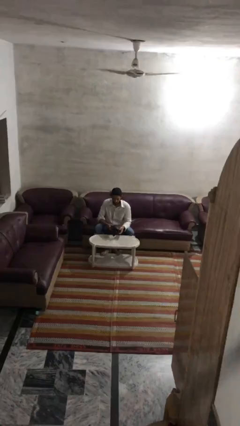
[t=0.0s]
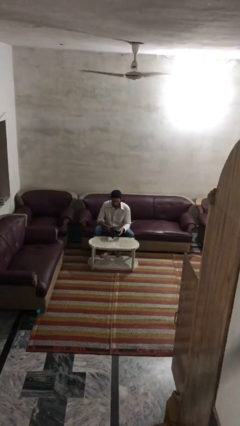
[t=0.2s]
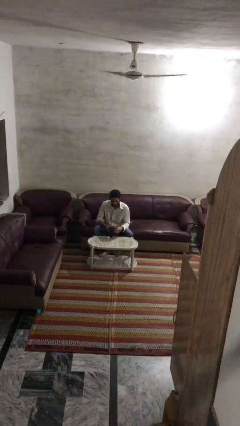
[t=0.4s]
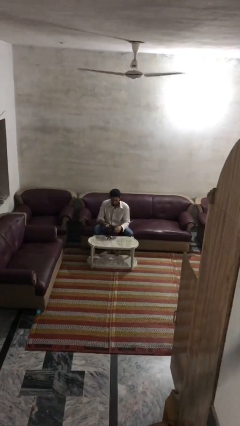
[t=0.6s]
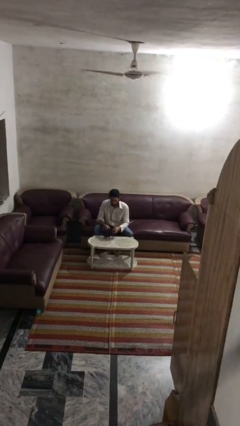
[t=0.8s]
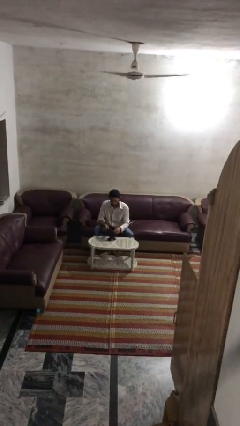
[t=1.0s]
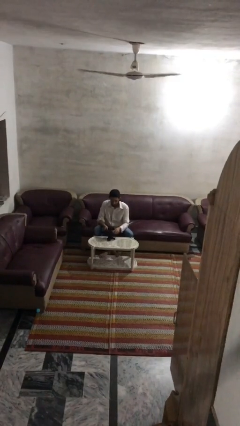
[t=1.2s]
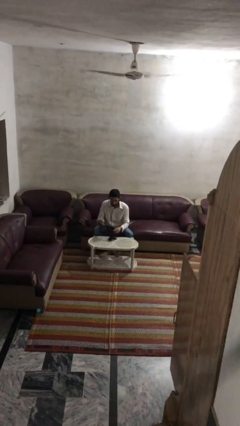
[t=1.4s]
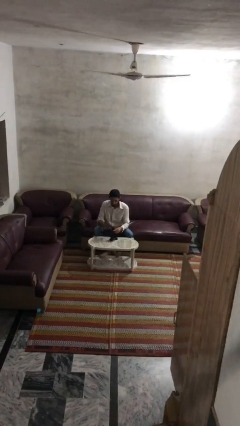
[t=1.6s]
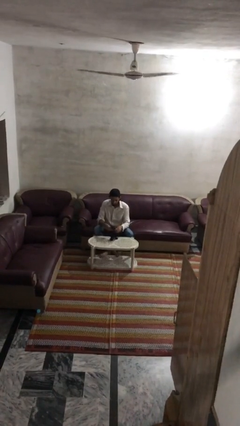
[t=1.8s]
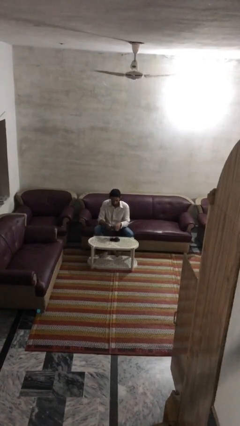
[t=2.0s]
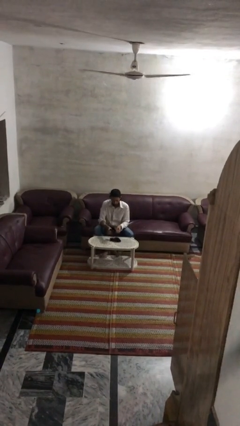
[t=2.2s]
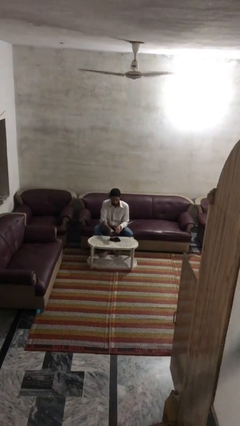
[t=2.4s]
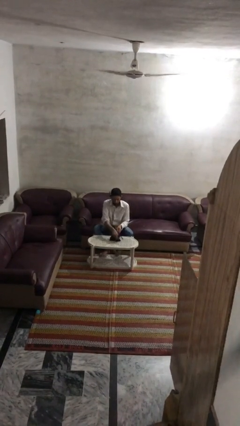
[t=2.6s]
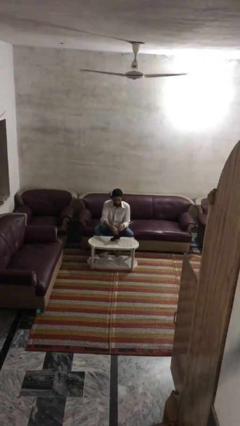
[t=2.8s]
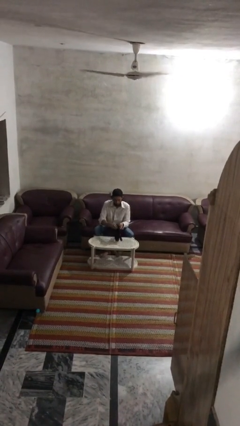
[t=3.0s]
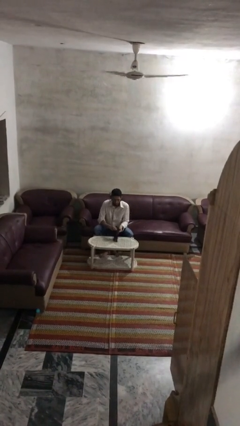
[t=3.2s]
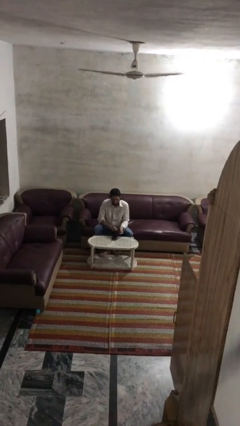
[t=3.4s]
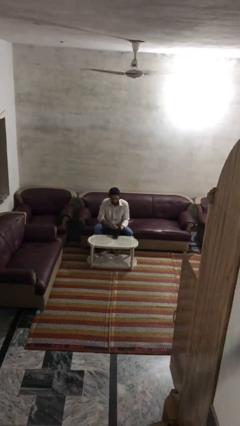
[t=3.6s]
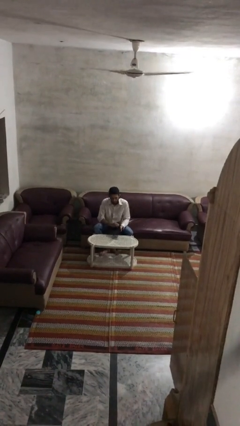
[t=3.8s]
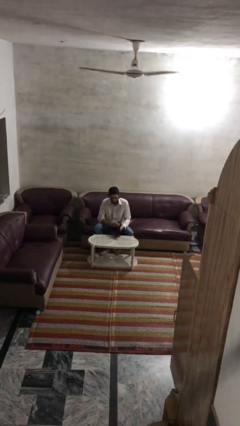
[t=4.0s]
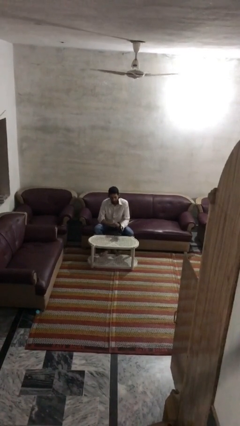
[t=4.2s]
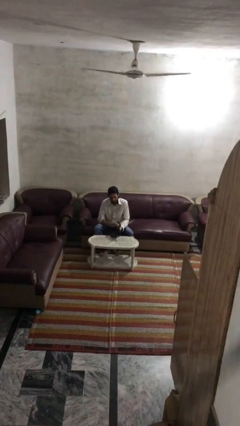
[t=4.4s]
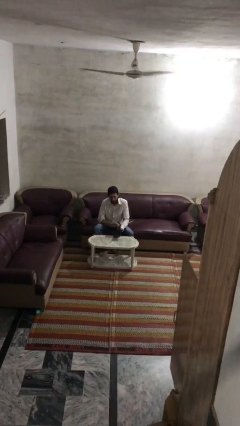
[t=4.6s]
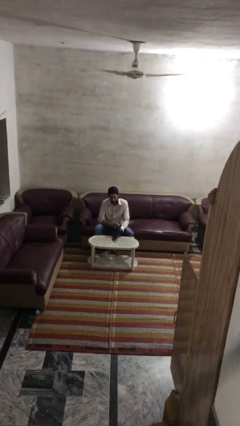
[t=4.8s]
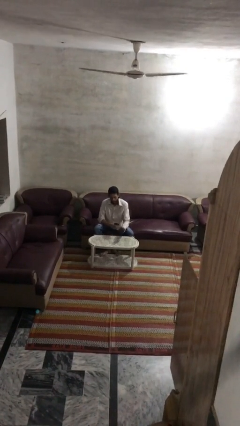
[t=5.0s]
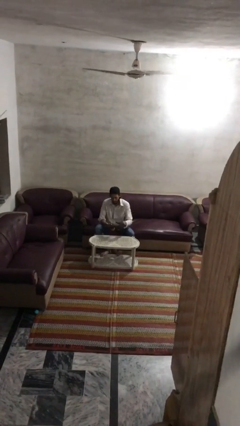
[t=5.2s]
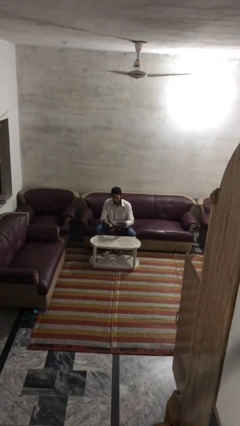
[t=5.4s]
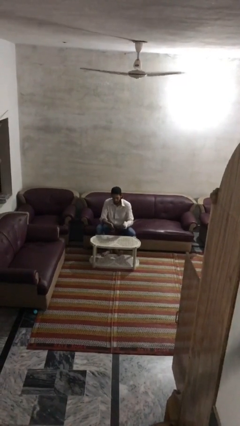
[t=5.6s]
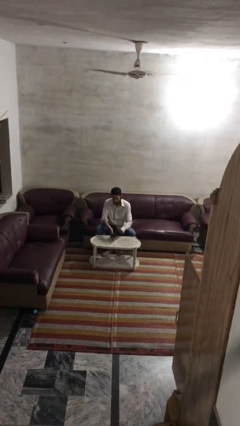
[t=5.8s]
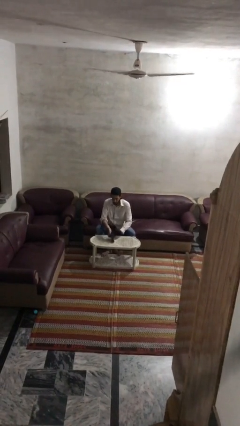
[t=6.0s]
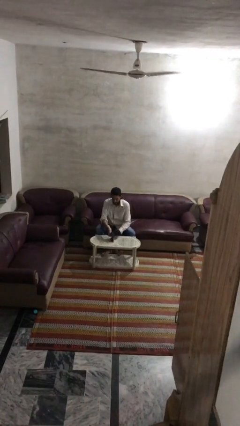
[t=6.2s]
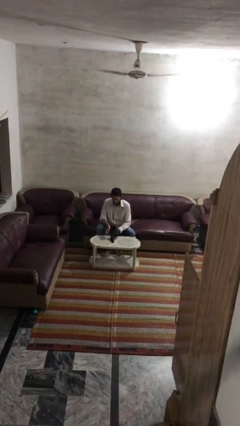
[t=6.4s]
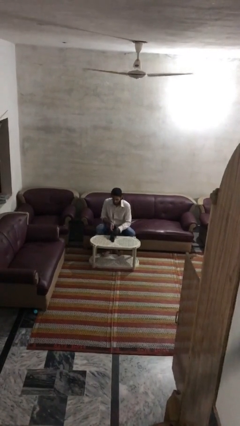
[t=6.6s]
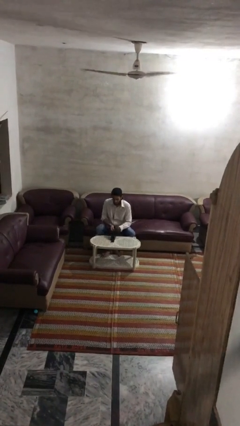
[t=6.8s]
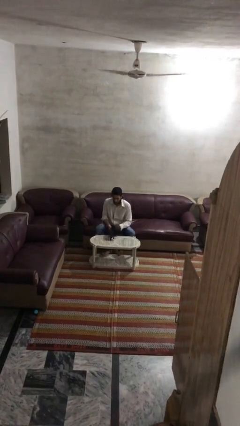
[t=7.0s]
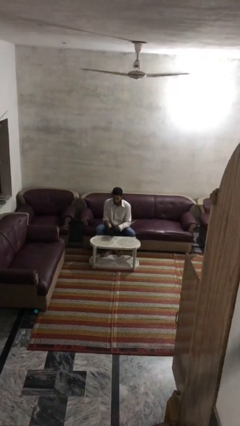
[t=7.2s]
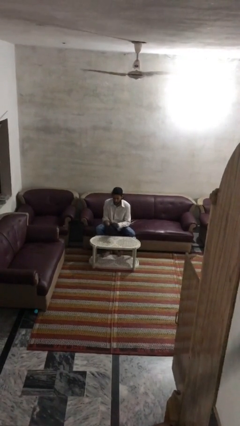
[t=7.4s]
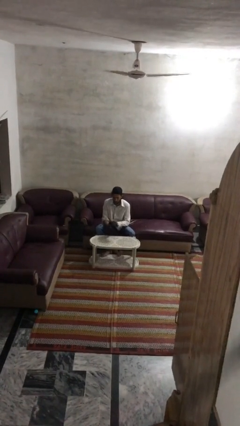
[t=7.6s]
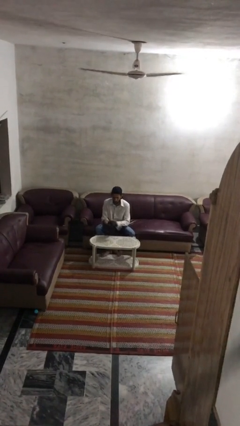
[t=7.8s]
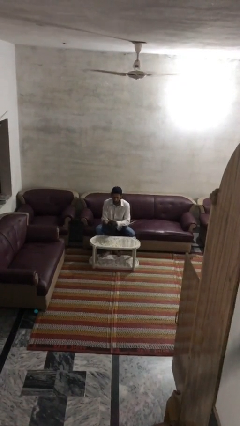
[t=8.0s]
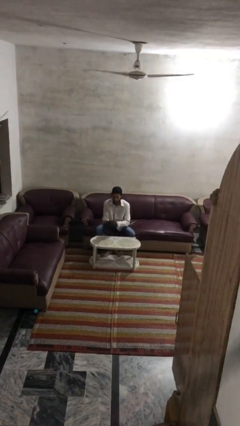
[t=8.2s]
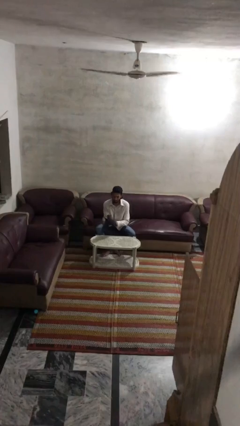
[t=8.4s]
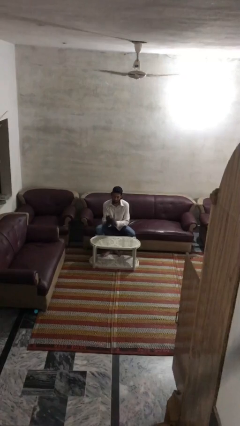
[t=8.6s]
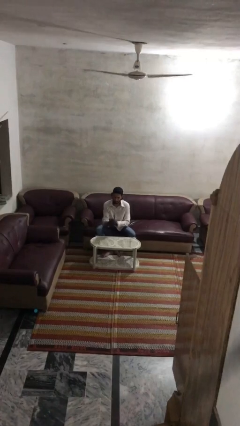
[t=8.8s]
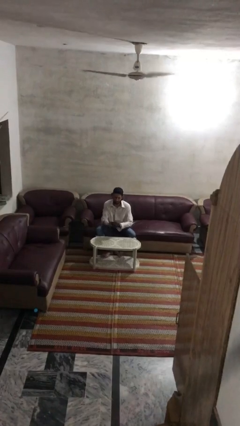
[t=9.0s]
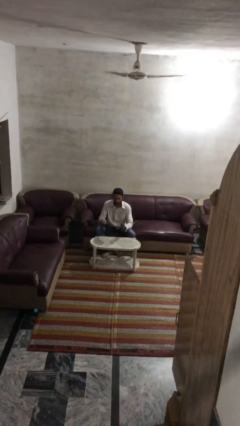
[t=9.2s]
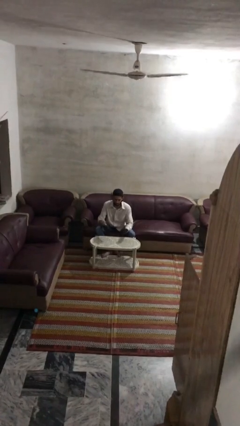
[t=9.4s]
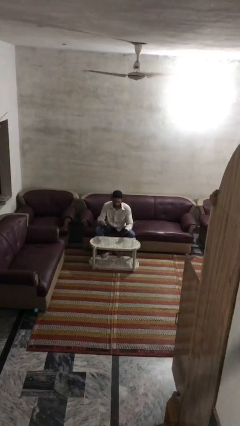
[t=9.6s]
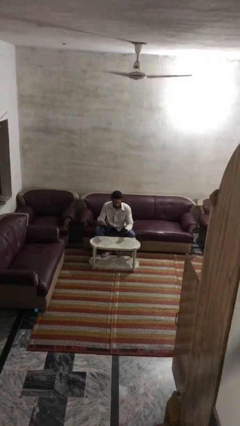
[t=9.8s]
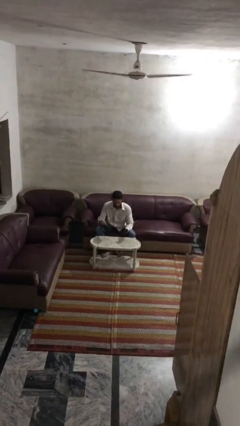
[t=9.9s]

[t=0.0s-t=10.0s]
person puts on gloves

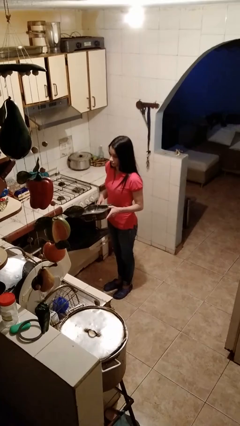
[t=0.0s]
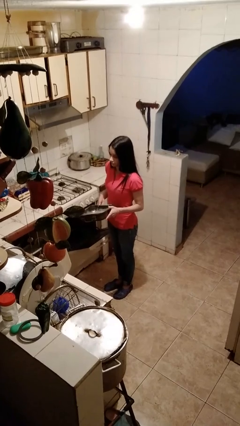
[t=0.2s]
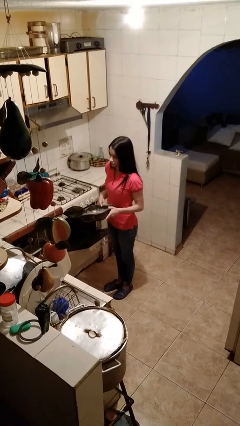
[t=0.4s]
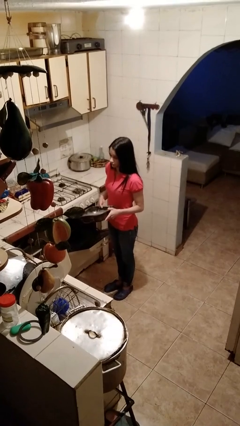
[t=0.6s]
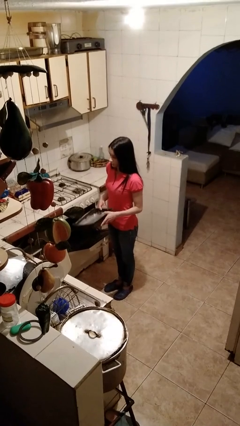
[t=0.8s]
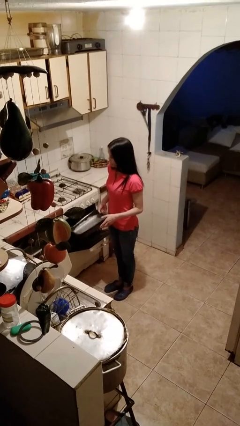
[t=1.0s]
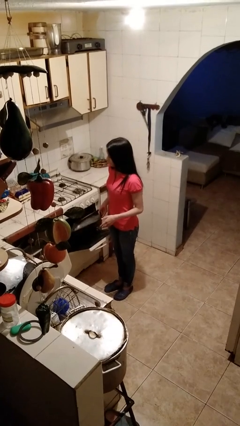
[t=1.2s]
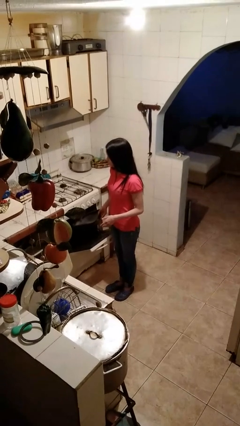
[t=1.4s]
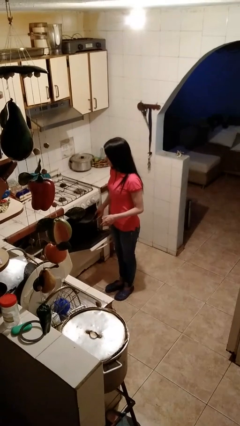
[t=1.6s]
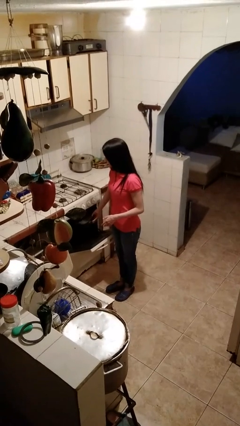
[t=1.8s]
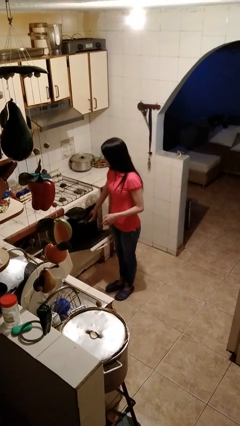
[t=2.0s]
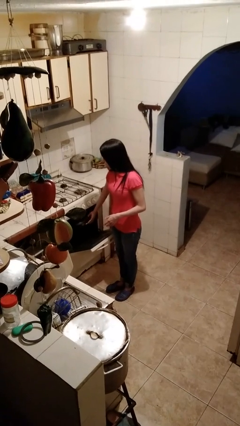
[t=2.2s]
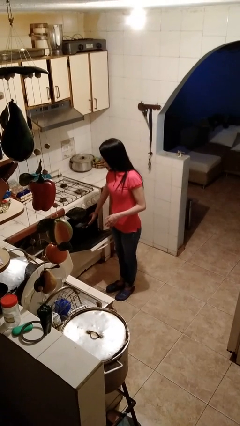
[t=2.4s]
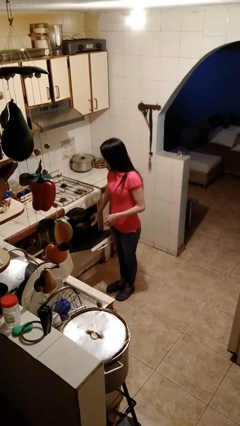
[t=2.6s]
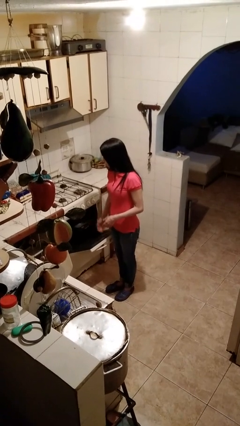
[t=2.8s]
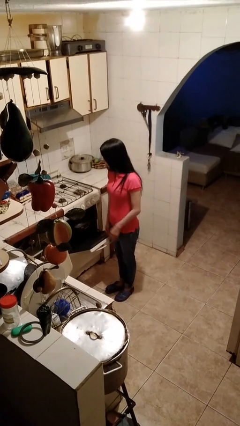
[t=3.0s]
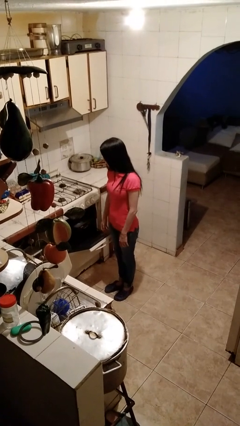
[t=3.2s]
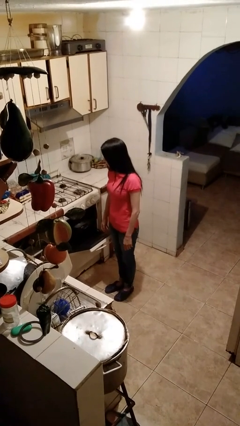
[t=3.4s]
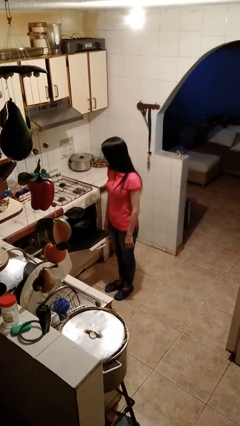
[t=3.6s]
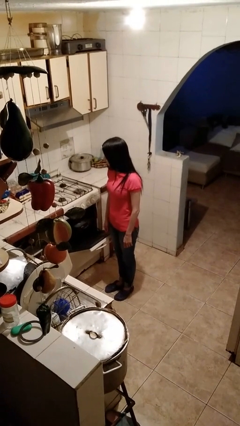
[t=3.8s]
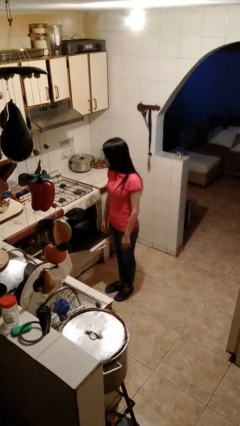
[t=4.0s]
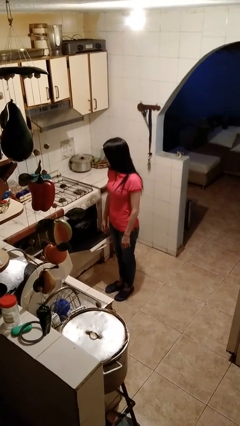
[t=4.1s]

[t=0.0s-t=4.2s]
person puts object into oven

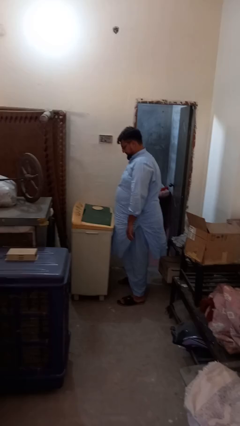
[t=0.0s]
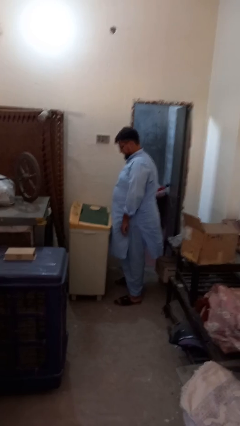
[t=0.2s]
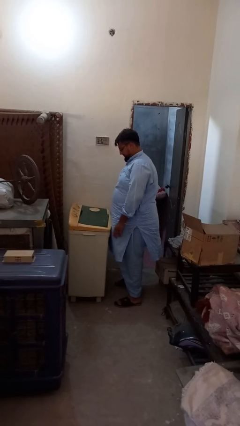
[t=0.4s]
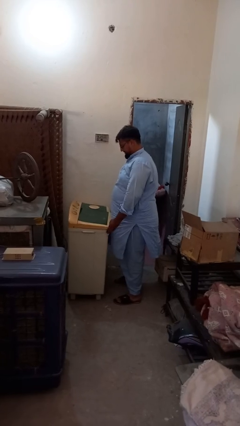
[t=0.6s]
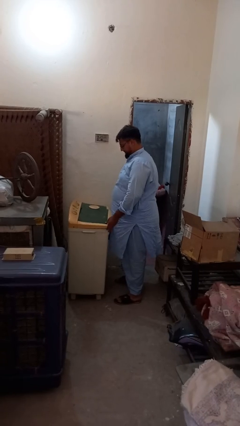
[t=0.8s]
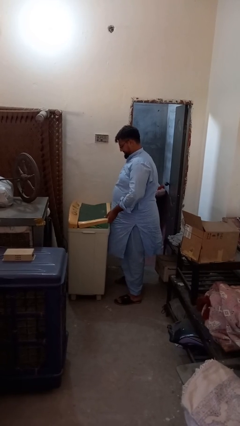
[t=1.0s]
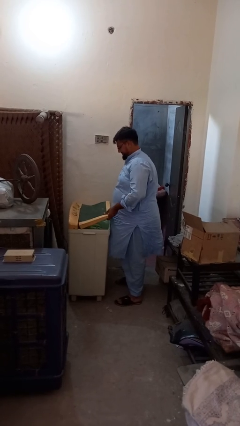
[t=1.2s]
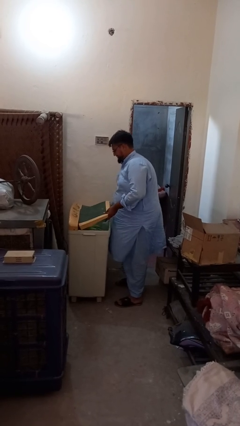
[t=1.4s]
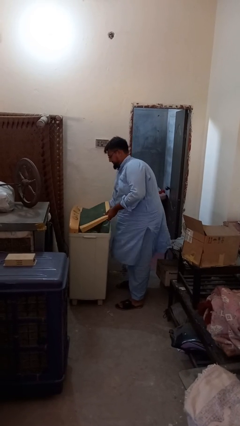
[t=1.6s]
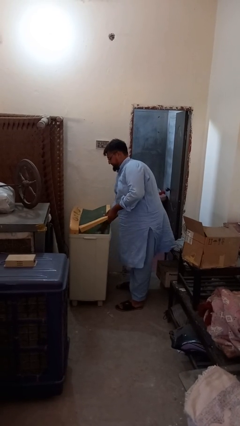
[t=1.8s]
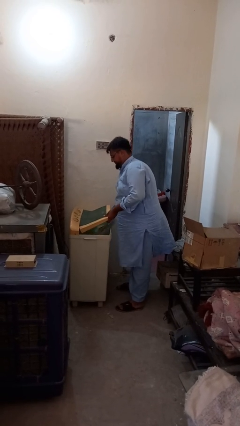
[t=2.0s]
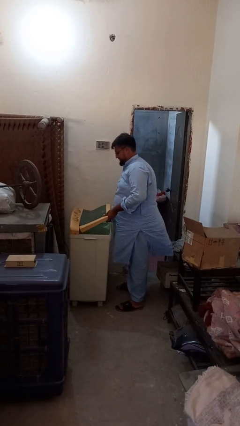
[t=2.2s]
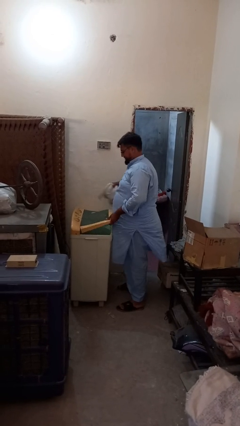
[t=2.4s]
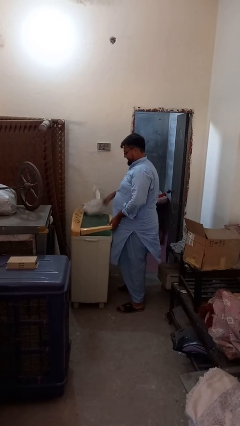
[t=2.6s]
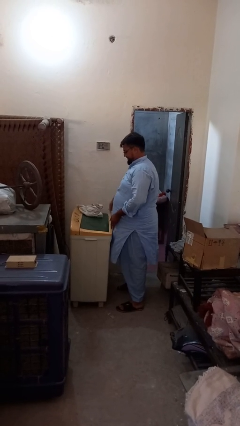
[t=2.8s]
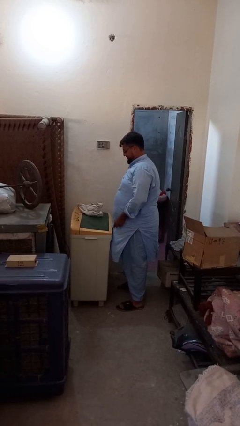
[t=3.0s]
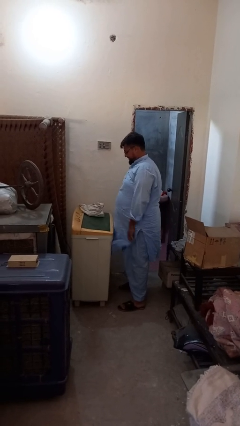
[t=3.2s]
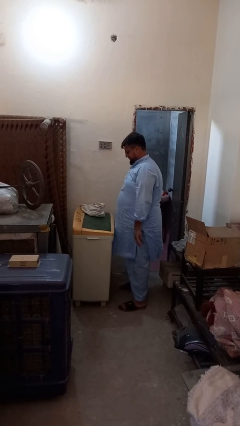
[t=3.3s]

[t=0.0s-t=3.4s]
person unloads clotheswasher

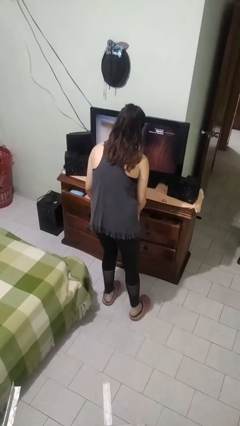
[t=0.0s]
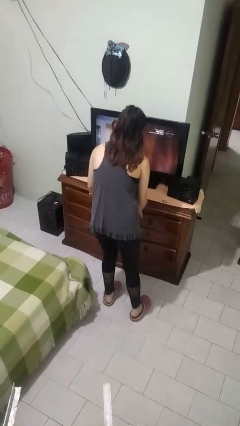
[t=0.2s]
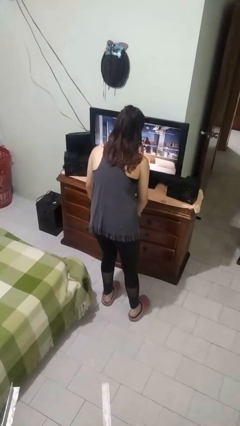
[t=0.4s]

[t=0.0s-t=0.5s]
person closes dresser drawer
